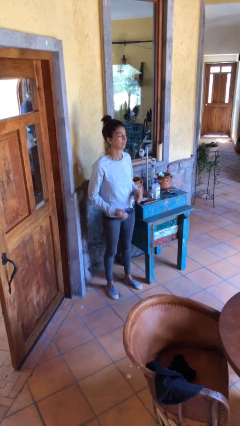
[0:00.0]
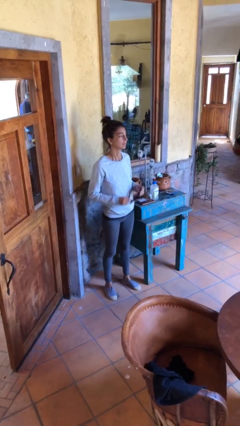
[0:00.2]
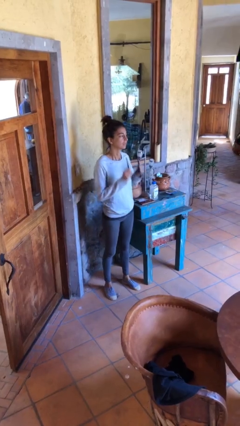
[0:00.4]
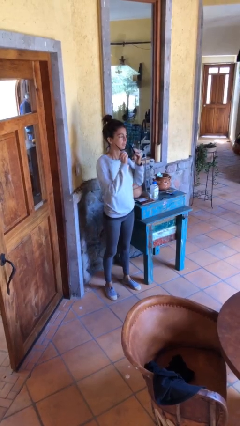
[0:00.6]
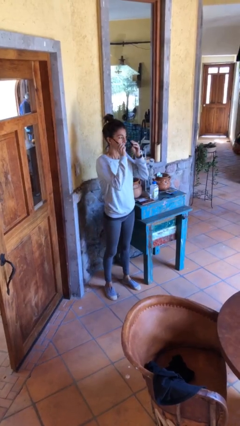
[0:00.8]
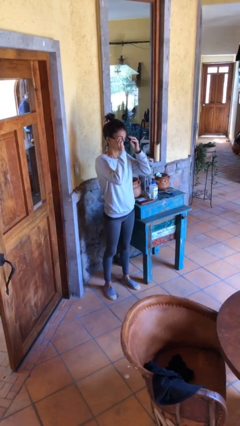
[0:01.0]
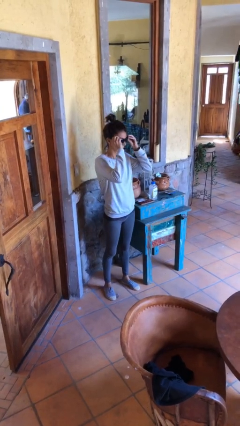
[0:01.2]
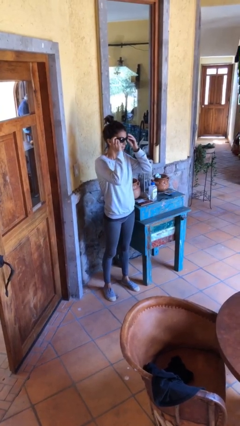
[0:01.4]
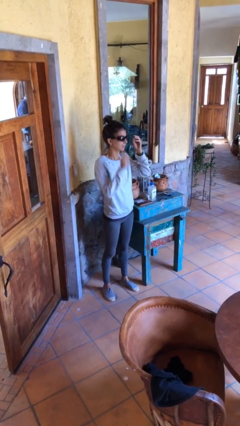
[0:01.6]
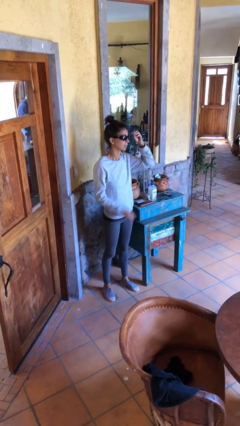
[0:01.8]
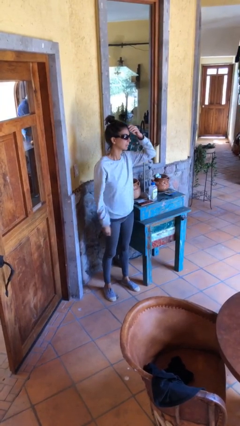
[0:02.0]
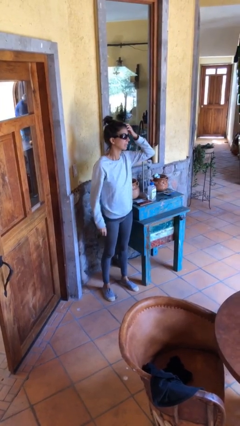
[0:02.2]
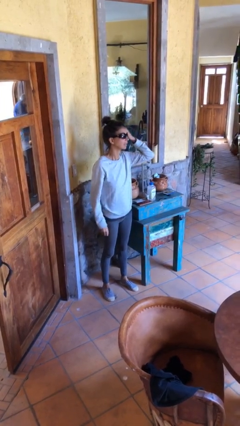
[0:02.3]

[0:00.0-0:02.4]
person puts on sunglasses

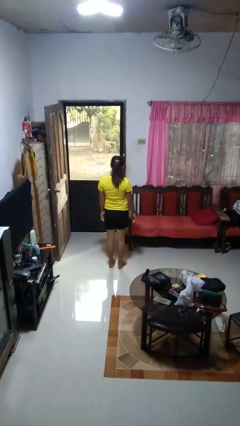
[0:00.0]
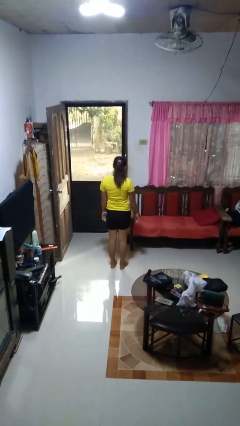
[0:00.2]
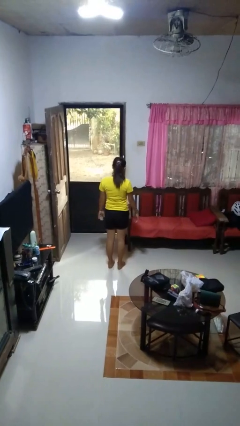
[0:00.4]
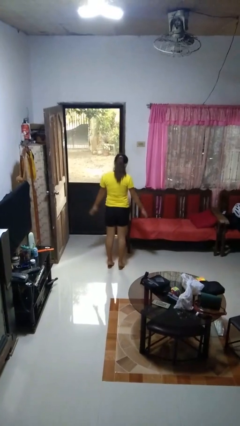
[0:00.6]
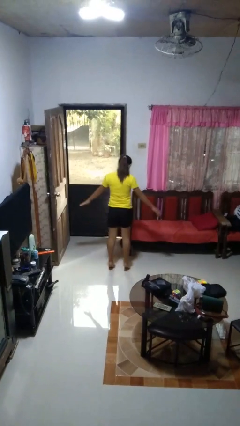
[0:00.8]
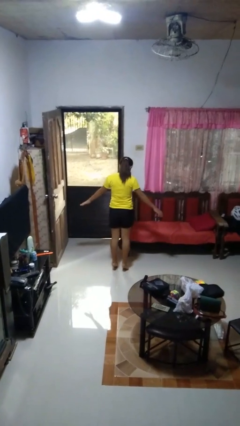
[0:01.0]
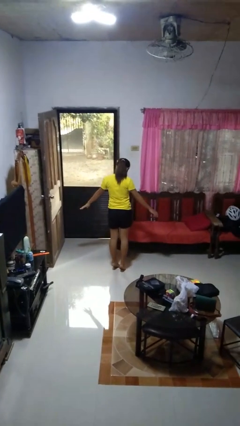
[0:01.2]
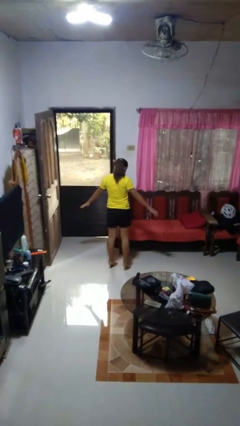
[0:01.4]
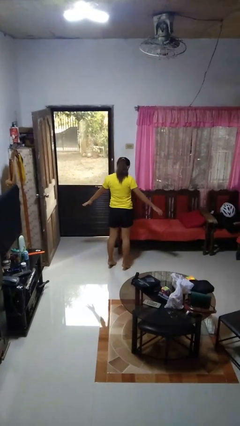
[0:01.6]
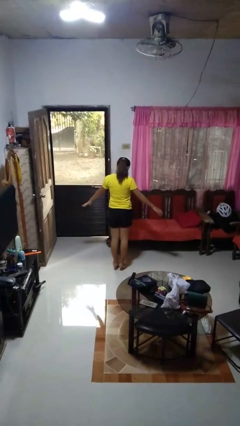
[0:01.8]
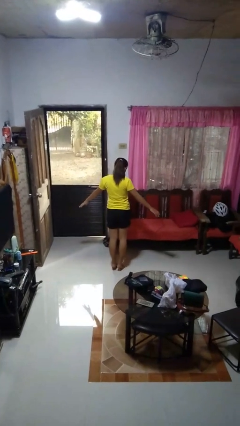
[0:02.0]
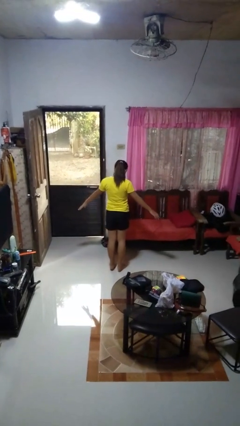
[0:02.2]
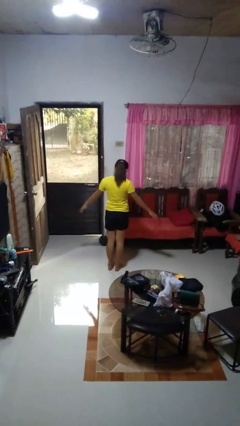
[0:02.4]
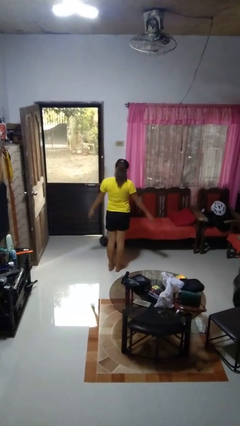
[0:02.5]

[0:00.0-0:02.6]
person walks tiptoe

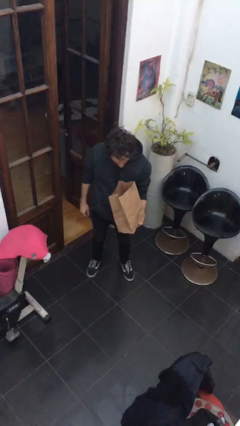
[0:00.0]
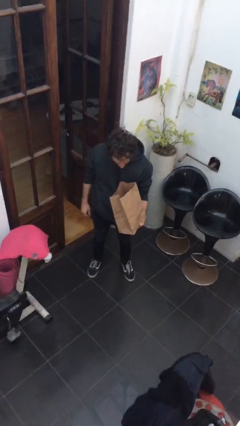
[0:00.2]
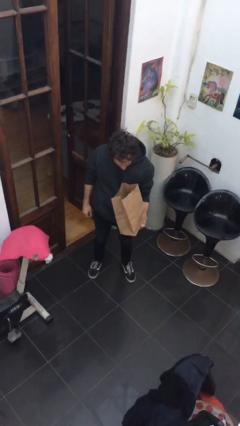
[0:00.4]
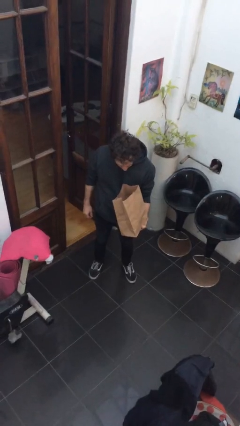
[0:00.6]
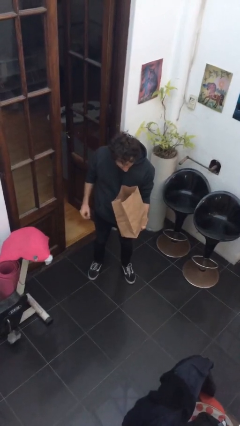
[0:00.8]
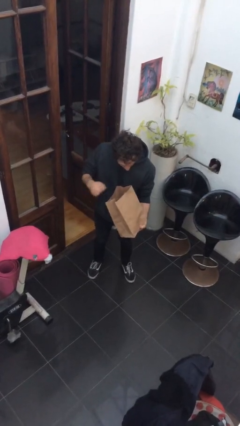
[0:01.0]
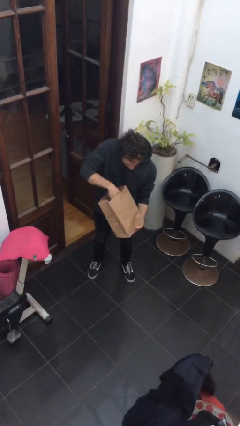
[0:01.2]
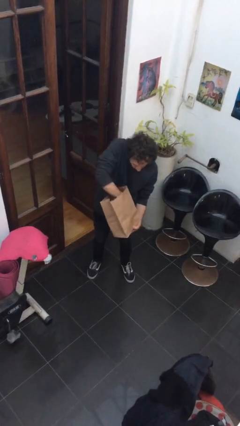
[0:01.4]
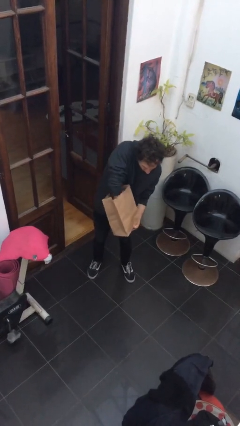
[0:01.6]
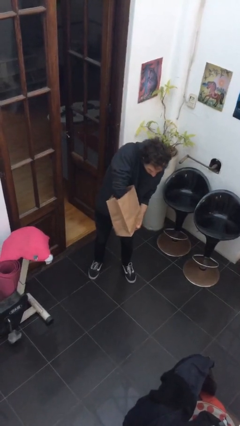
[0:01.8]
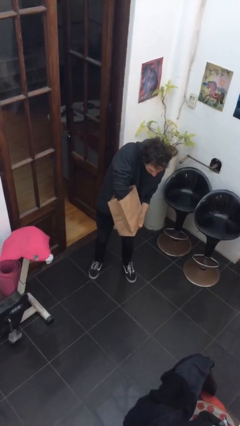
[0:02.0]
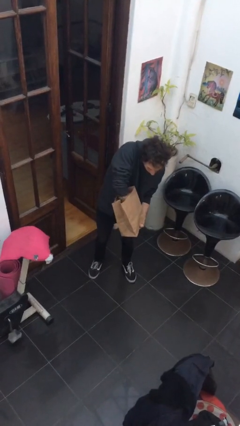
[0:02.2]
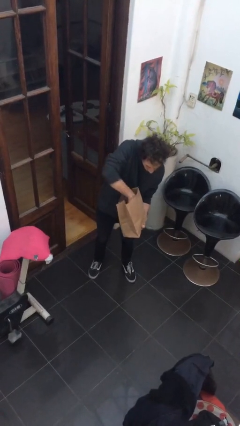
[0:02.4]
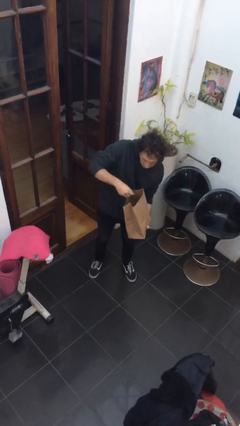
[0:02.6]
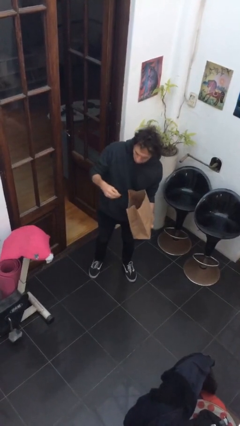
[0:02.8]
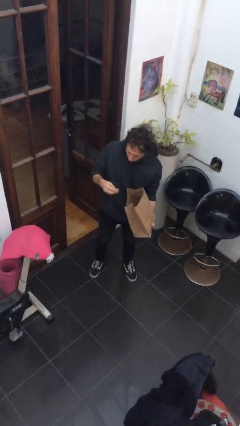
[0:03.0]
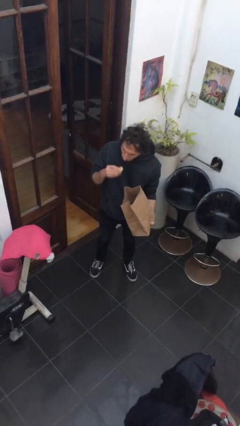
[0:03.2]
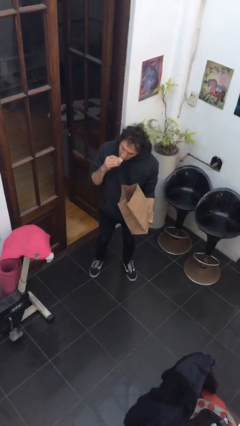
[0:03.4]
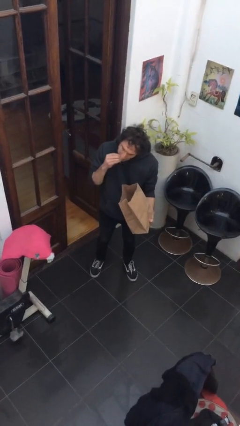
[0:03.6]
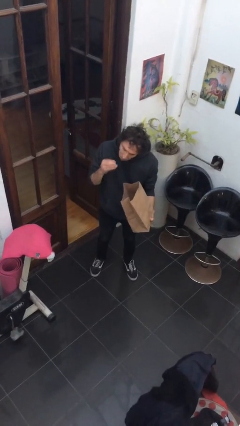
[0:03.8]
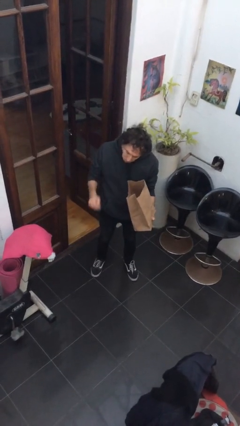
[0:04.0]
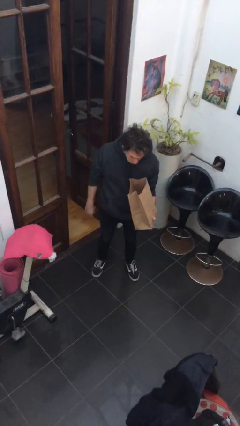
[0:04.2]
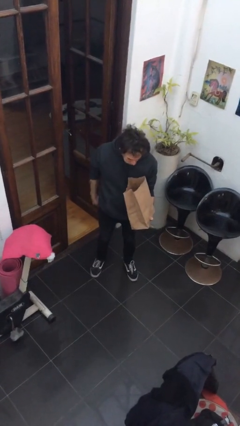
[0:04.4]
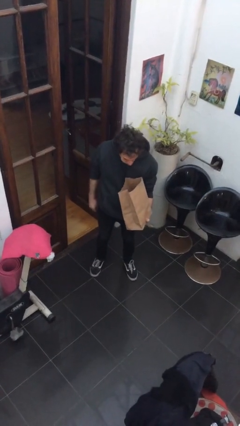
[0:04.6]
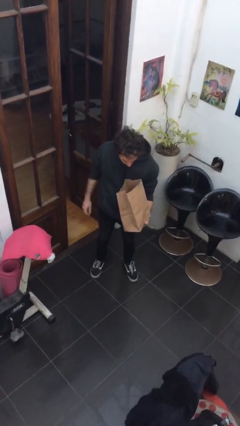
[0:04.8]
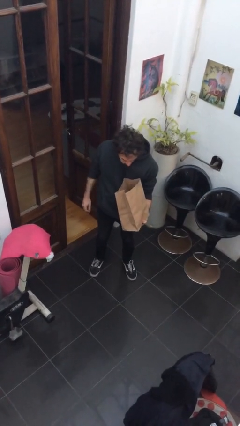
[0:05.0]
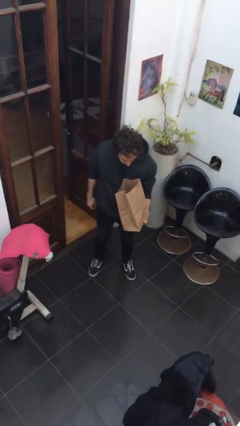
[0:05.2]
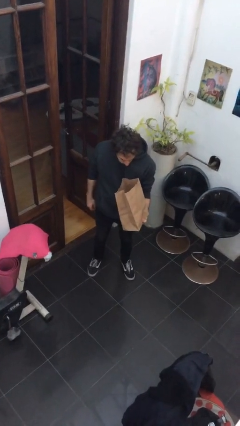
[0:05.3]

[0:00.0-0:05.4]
person eats snack from bag

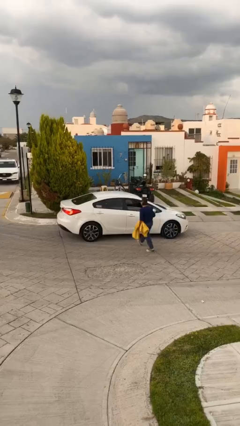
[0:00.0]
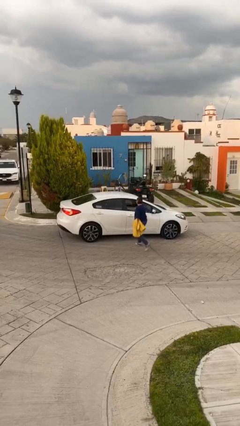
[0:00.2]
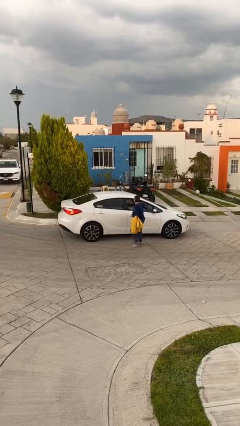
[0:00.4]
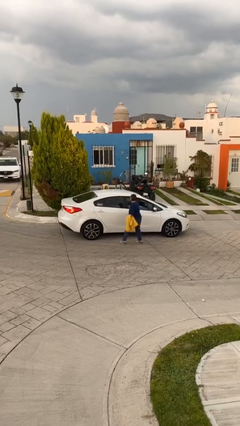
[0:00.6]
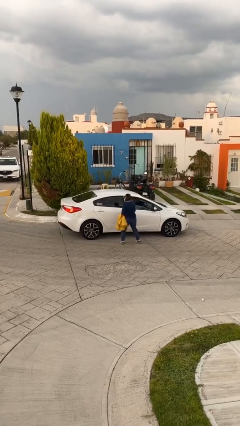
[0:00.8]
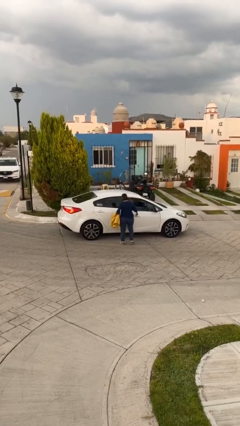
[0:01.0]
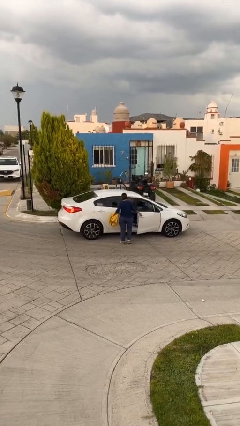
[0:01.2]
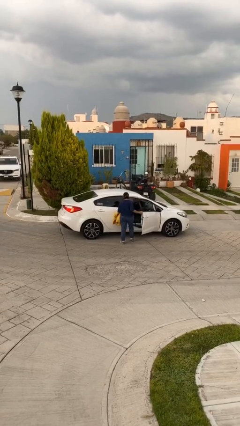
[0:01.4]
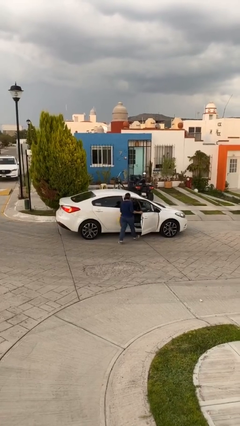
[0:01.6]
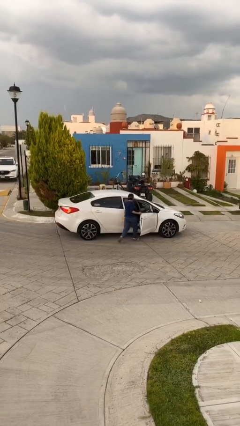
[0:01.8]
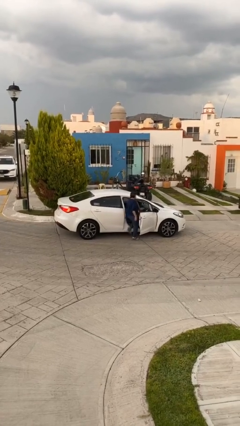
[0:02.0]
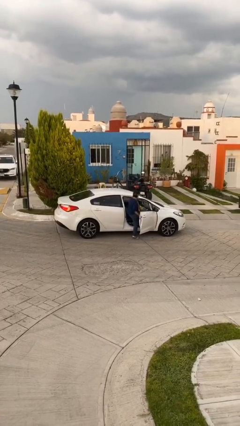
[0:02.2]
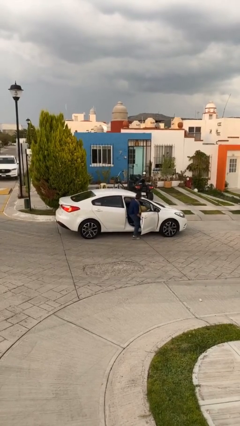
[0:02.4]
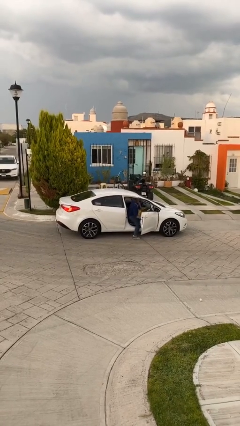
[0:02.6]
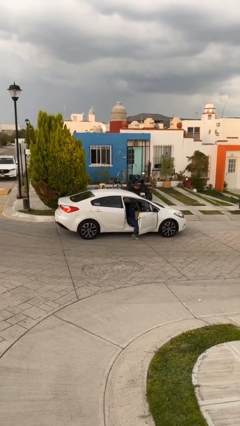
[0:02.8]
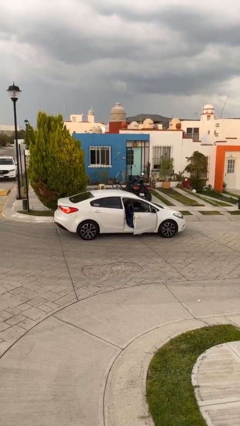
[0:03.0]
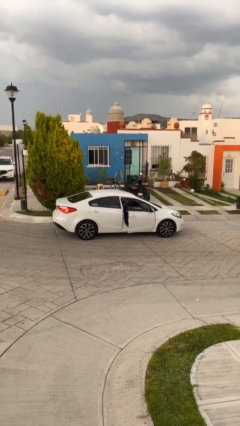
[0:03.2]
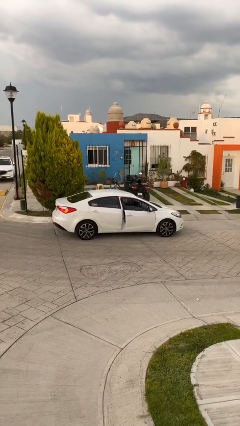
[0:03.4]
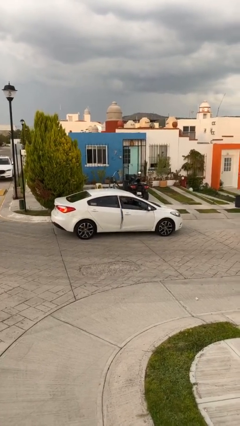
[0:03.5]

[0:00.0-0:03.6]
car picks up person

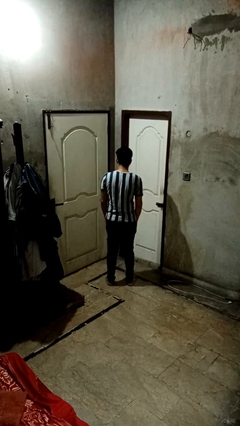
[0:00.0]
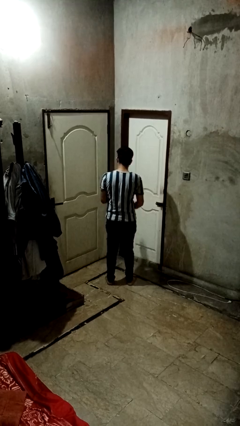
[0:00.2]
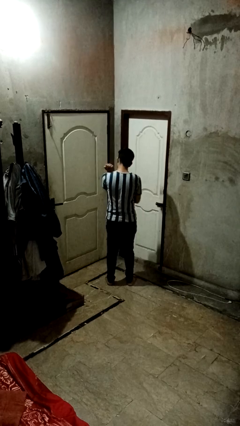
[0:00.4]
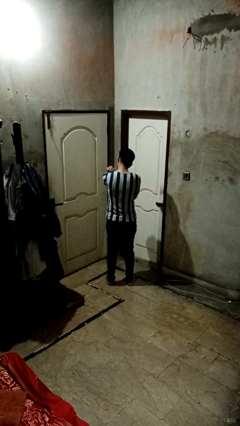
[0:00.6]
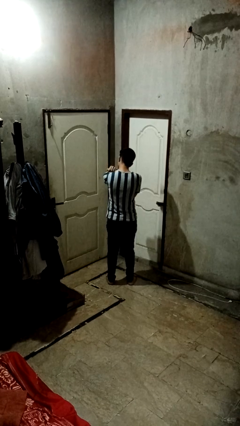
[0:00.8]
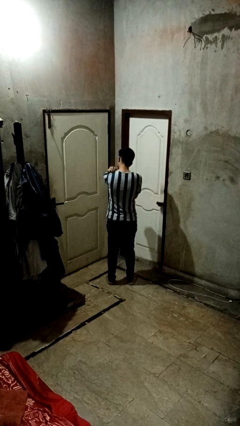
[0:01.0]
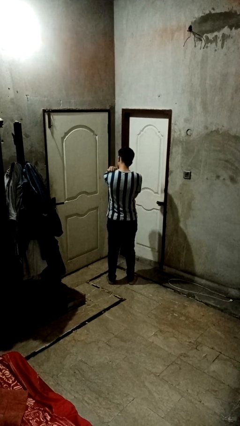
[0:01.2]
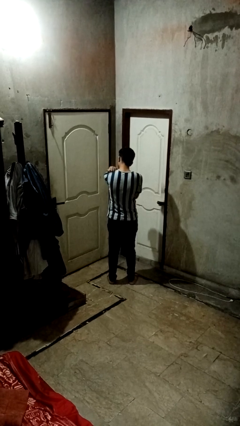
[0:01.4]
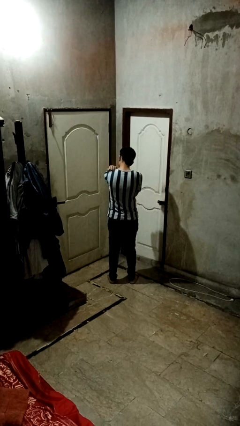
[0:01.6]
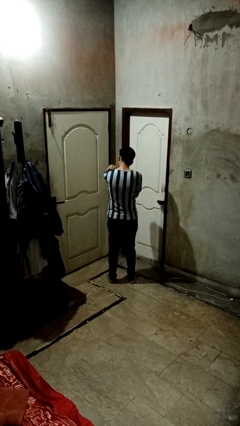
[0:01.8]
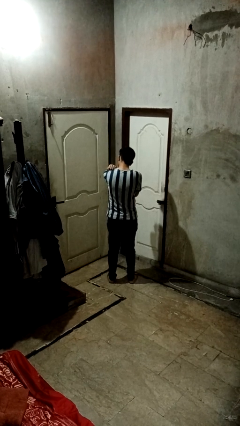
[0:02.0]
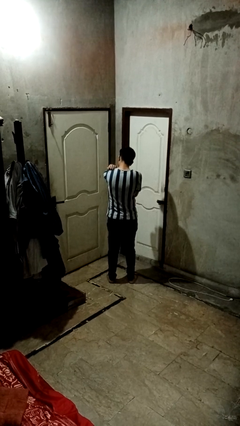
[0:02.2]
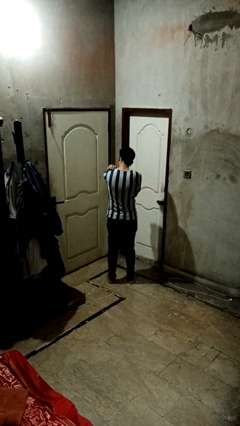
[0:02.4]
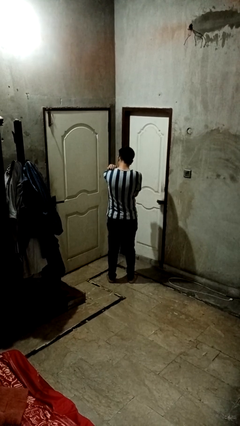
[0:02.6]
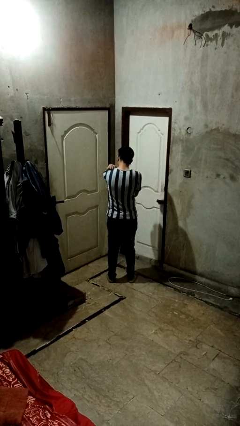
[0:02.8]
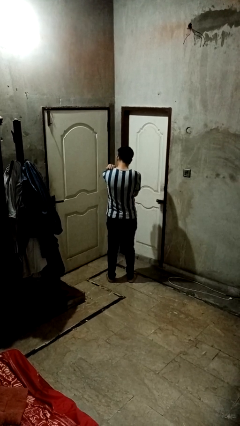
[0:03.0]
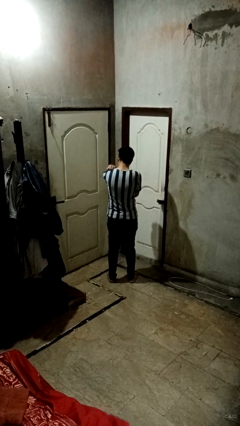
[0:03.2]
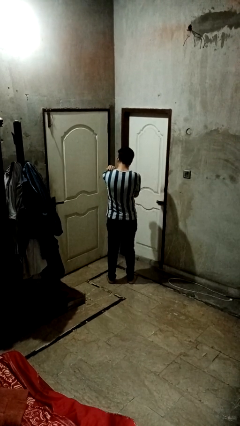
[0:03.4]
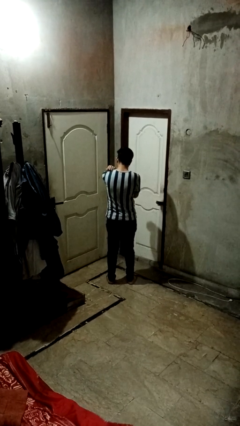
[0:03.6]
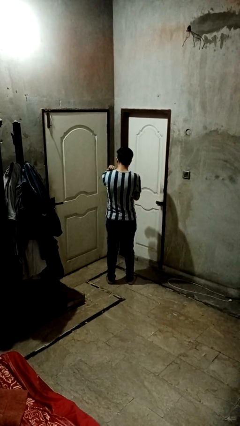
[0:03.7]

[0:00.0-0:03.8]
person swats bug
